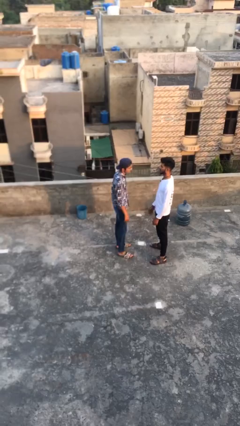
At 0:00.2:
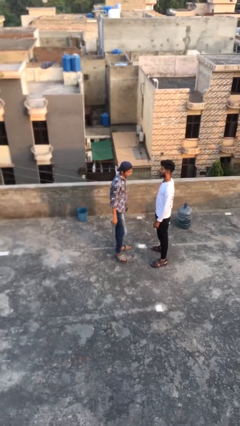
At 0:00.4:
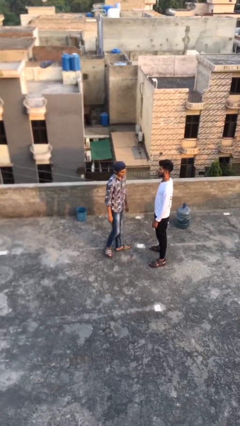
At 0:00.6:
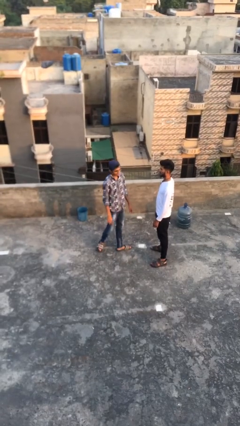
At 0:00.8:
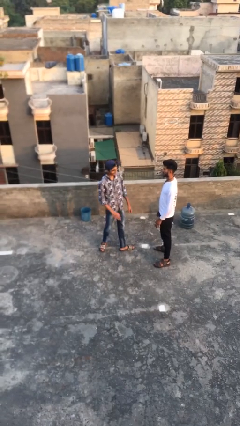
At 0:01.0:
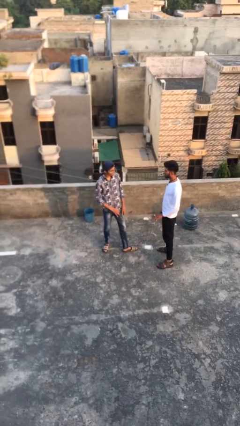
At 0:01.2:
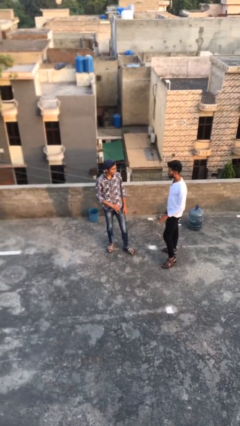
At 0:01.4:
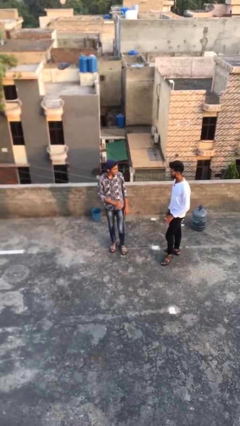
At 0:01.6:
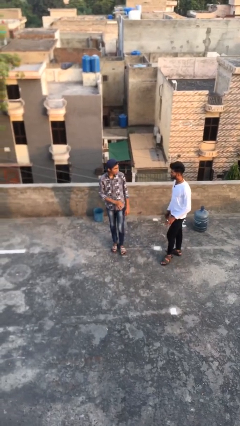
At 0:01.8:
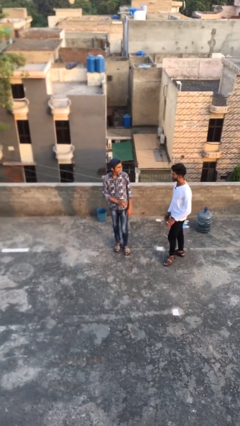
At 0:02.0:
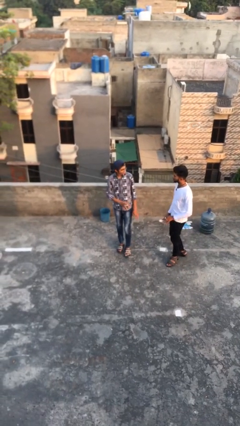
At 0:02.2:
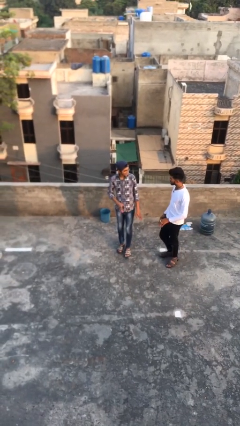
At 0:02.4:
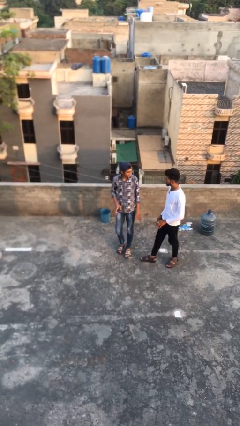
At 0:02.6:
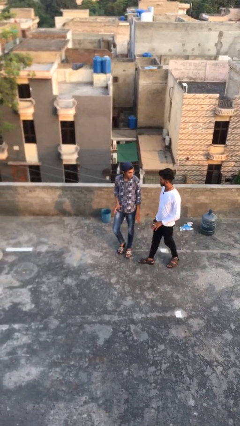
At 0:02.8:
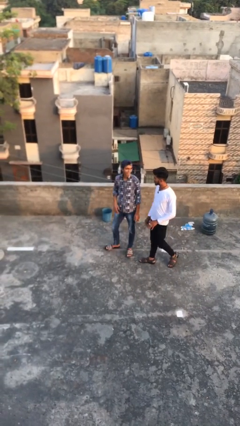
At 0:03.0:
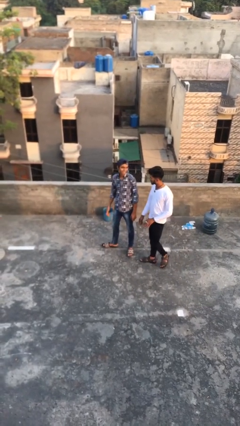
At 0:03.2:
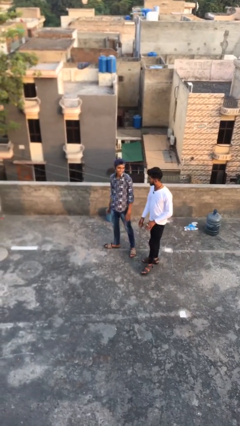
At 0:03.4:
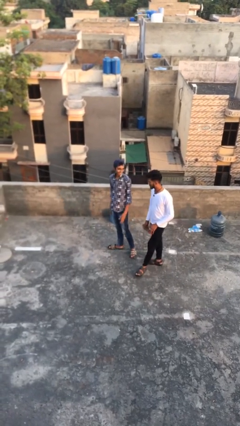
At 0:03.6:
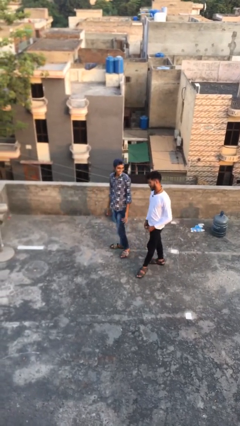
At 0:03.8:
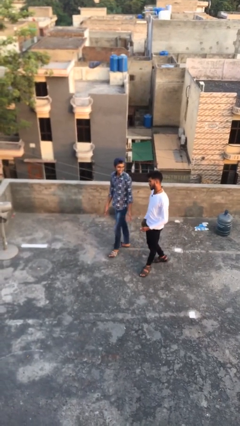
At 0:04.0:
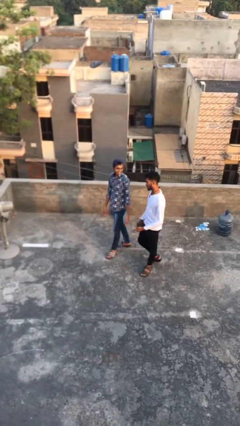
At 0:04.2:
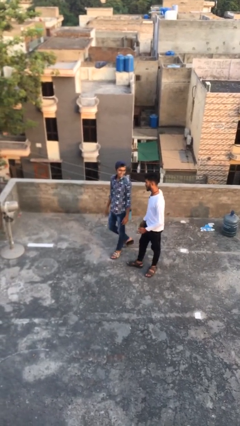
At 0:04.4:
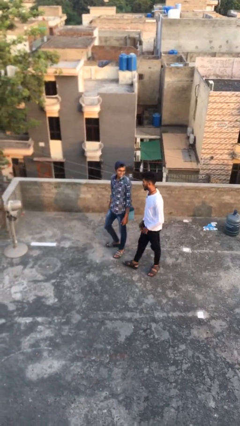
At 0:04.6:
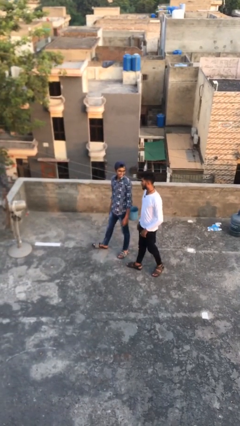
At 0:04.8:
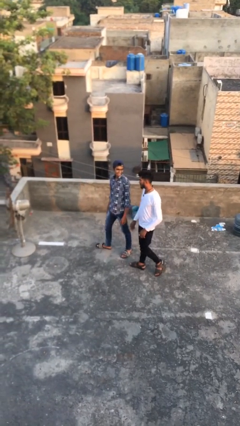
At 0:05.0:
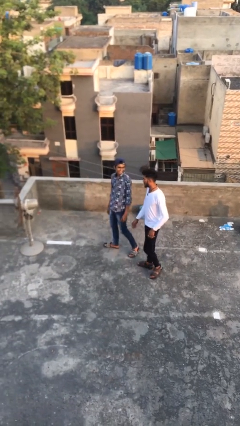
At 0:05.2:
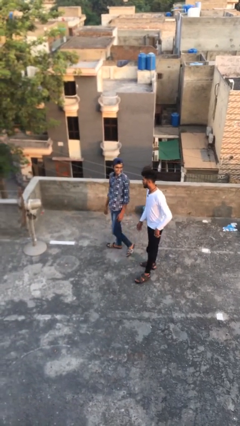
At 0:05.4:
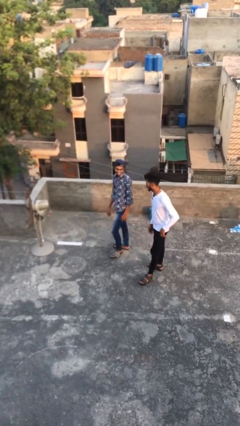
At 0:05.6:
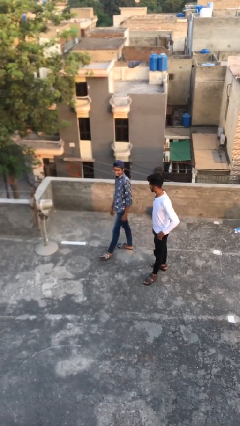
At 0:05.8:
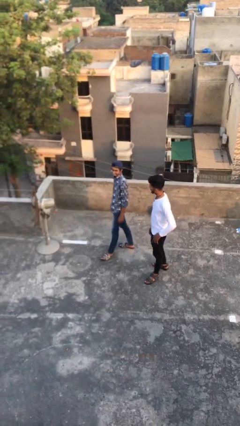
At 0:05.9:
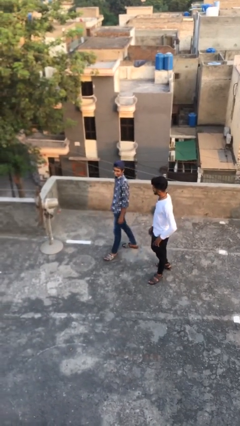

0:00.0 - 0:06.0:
person talks to person

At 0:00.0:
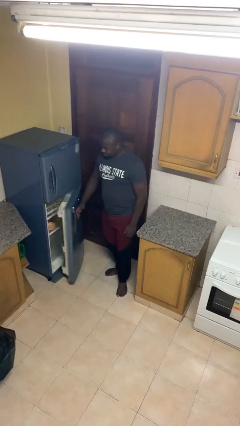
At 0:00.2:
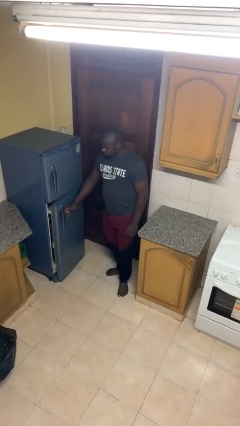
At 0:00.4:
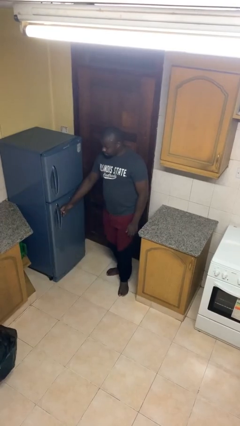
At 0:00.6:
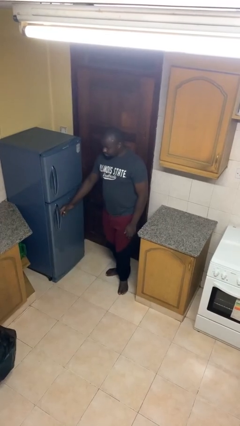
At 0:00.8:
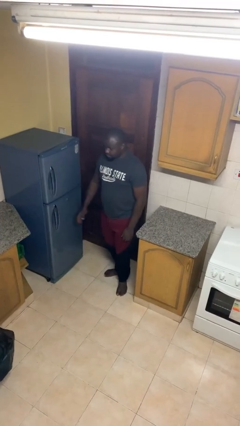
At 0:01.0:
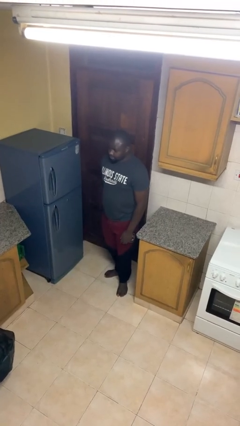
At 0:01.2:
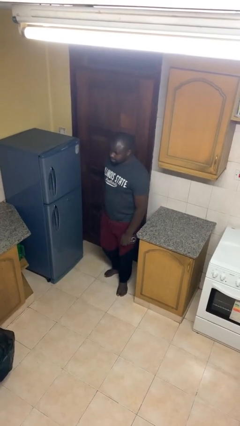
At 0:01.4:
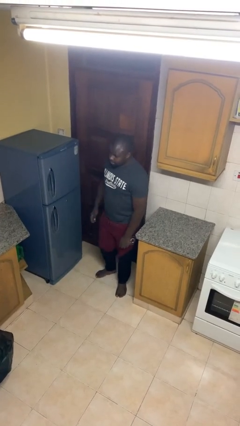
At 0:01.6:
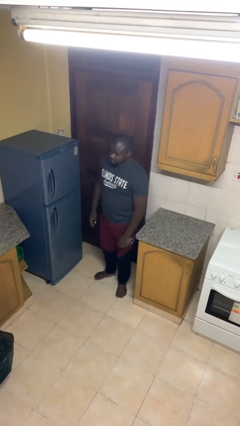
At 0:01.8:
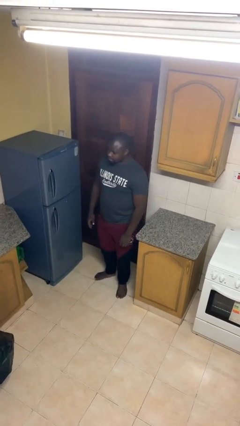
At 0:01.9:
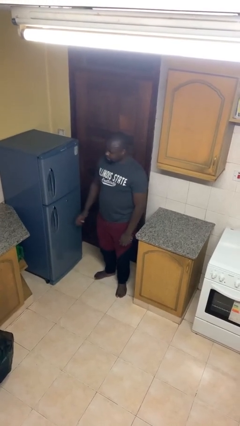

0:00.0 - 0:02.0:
person closes refrigerator

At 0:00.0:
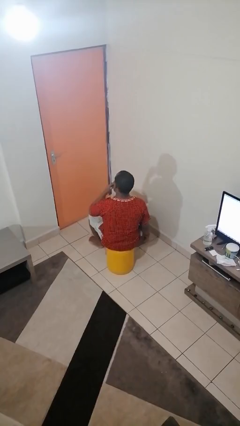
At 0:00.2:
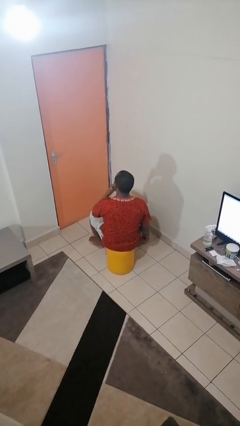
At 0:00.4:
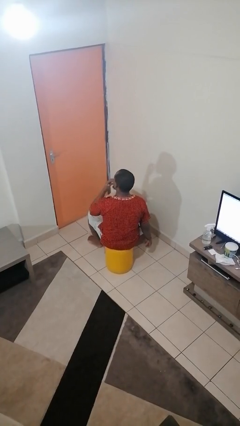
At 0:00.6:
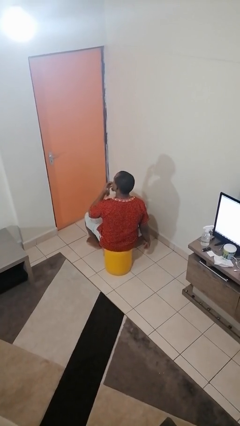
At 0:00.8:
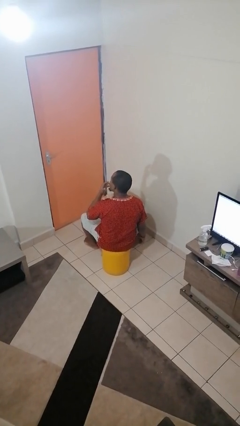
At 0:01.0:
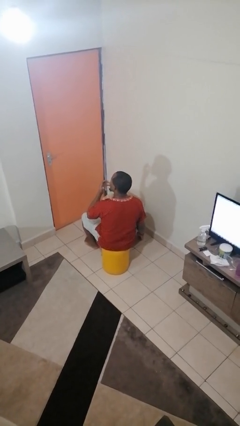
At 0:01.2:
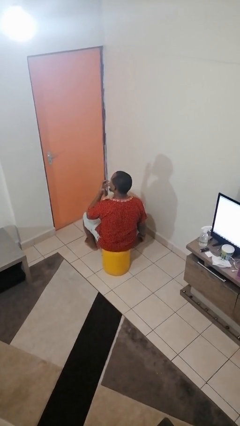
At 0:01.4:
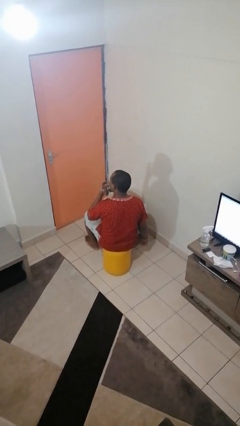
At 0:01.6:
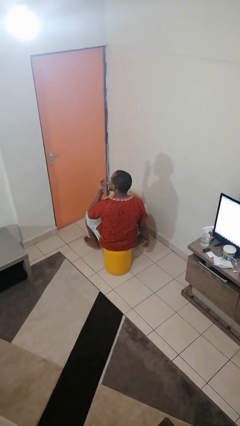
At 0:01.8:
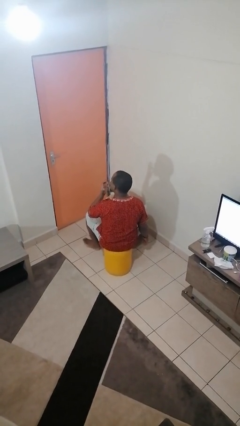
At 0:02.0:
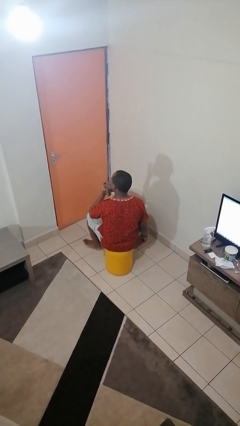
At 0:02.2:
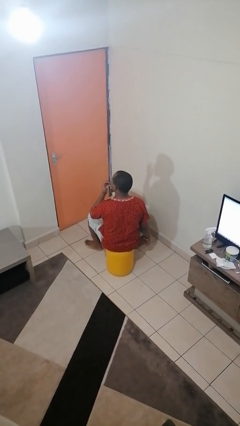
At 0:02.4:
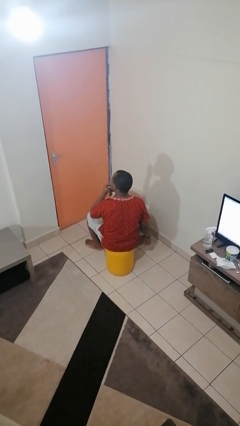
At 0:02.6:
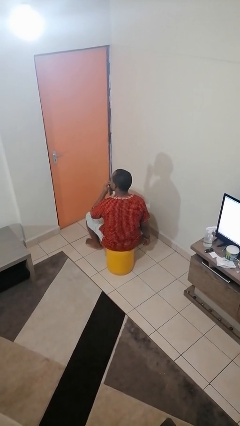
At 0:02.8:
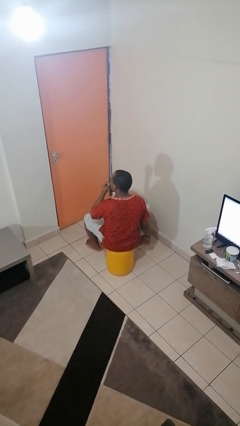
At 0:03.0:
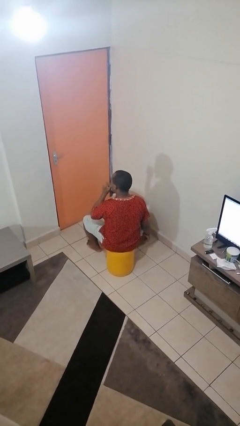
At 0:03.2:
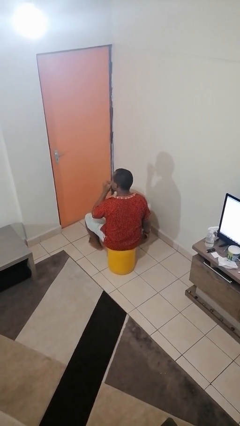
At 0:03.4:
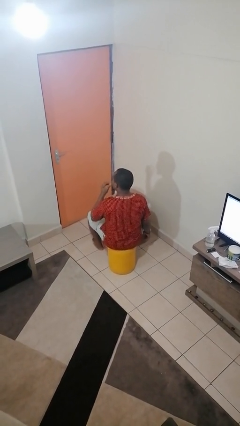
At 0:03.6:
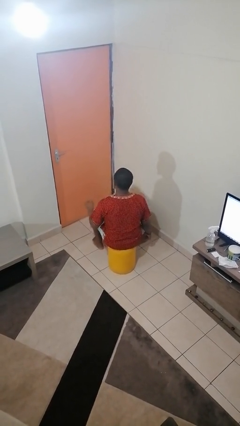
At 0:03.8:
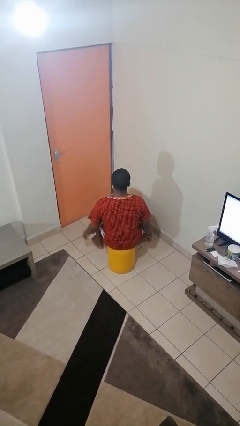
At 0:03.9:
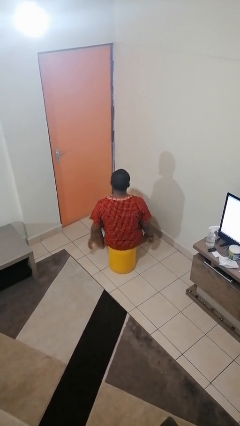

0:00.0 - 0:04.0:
person licks fingers

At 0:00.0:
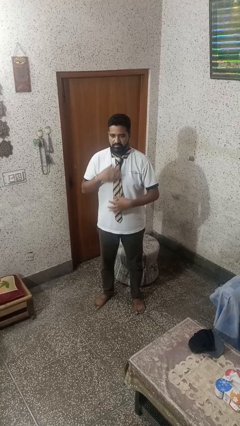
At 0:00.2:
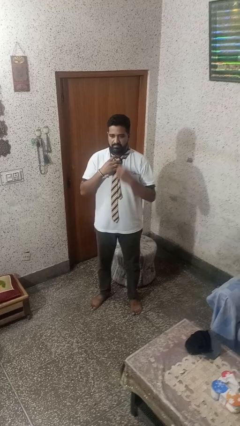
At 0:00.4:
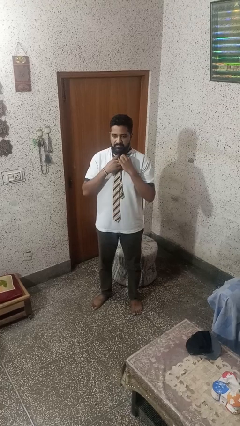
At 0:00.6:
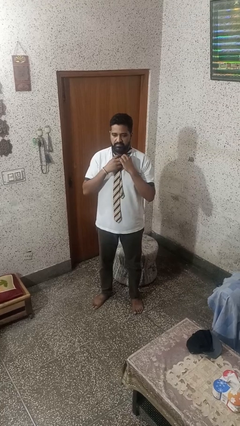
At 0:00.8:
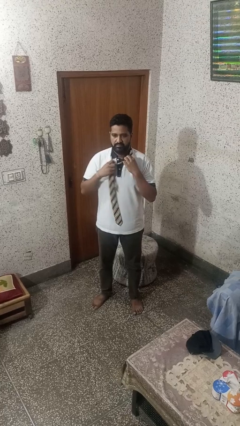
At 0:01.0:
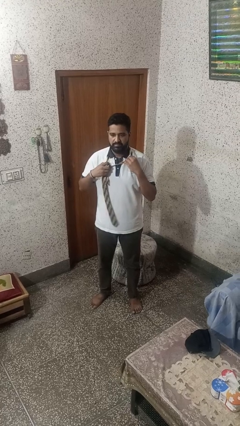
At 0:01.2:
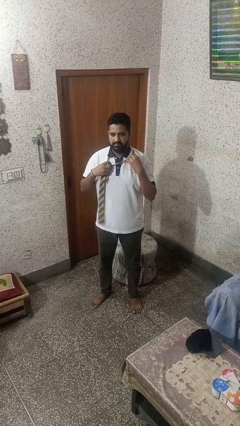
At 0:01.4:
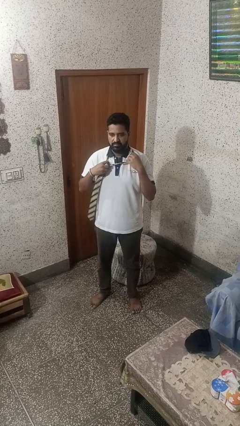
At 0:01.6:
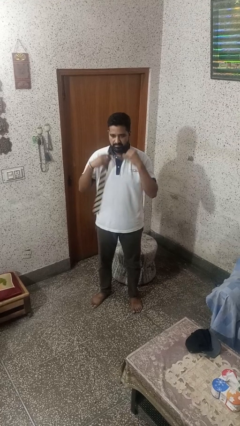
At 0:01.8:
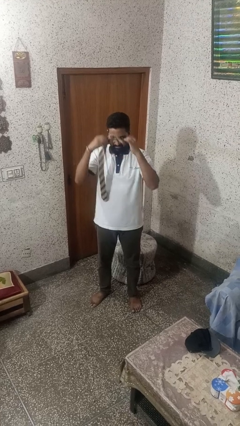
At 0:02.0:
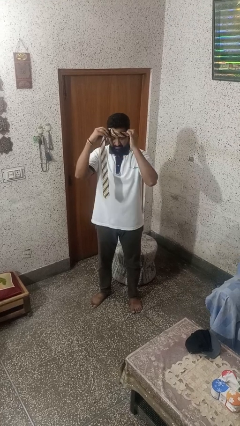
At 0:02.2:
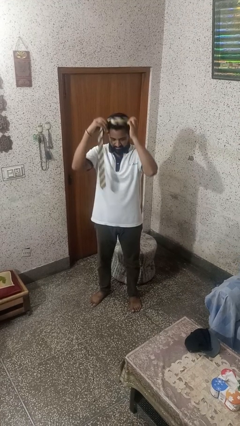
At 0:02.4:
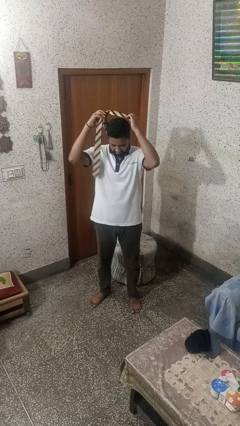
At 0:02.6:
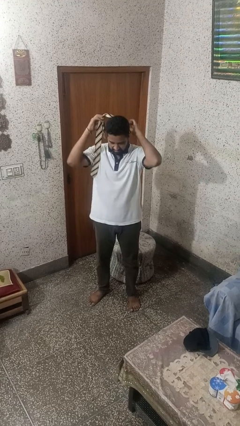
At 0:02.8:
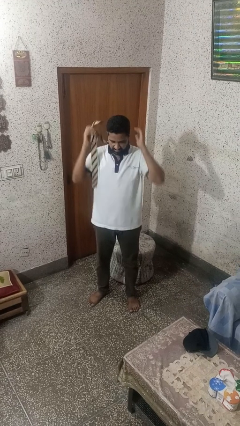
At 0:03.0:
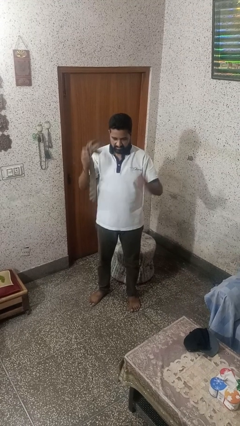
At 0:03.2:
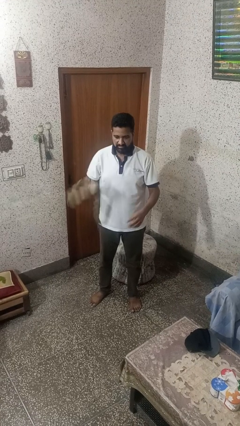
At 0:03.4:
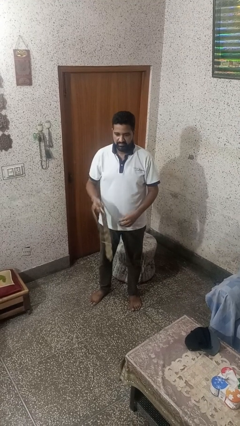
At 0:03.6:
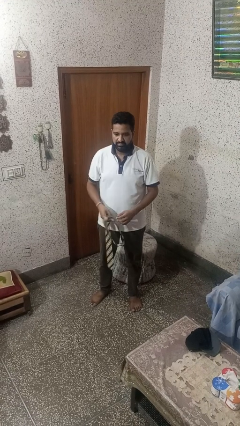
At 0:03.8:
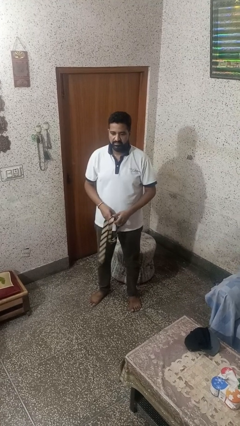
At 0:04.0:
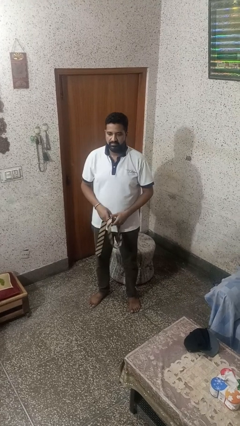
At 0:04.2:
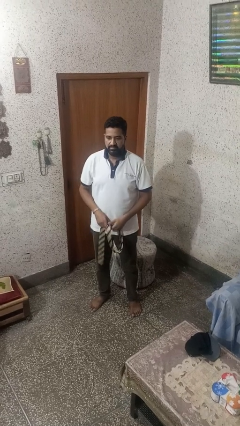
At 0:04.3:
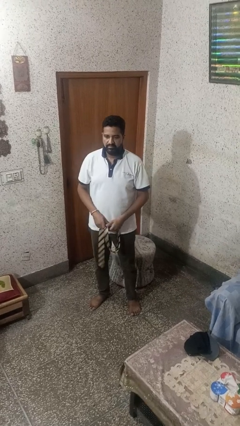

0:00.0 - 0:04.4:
person takes off necktie

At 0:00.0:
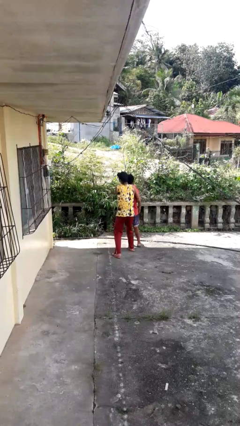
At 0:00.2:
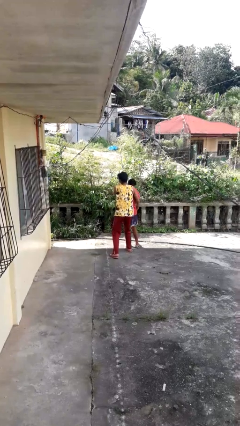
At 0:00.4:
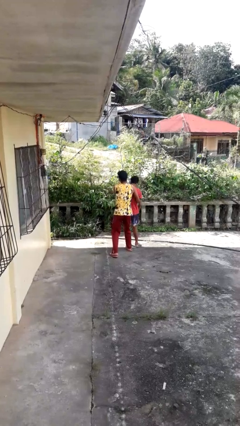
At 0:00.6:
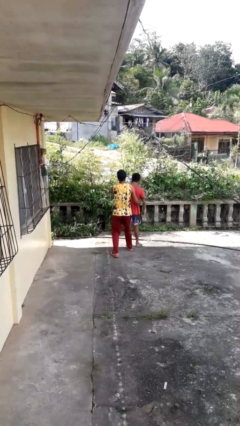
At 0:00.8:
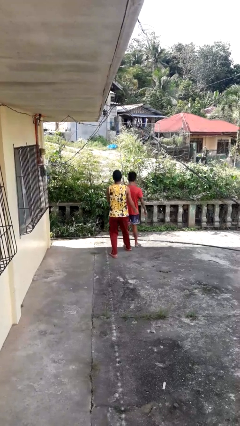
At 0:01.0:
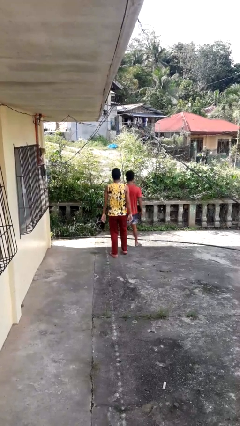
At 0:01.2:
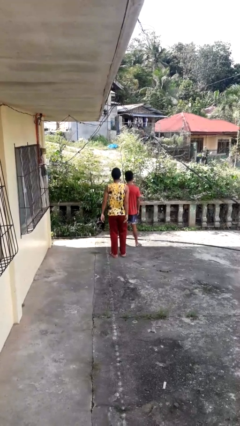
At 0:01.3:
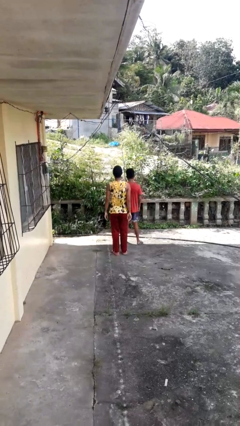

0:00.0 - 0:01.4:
person puts down person
